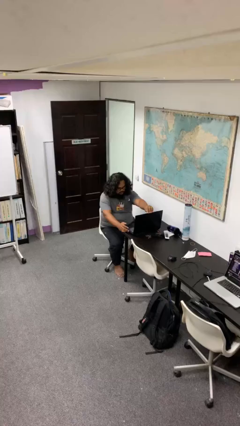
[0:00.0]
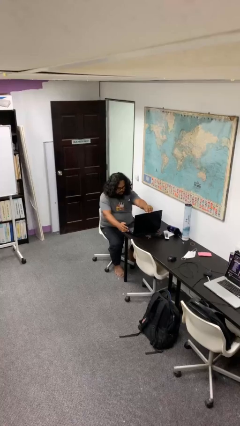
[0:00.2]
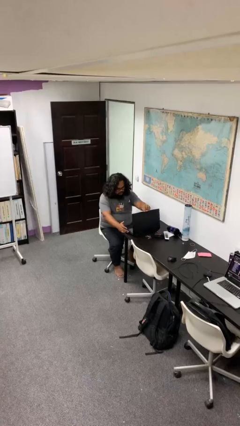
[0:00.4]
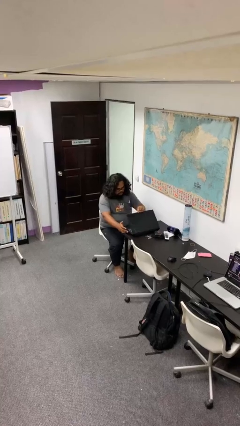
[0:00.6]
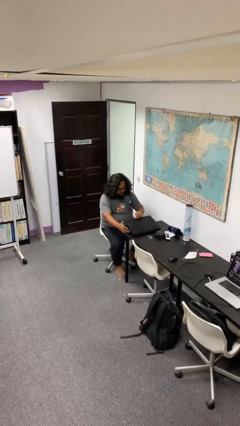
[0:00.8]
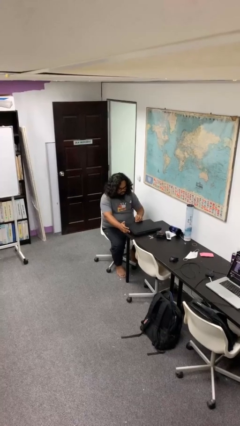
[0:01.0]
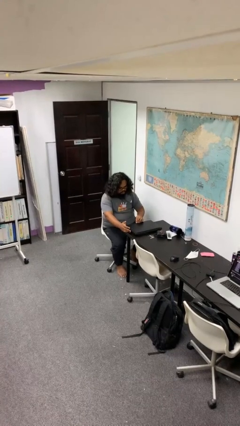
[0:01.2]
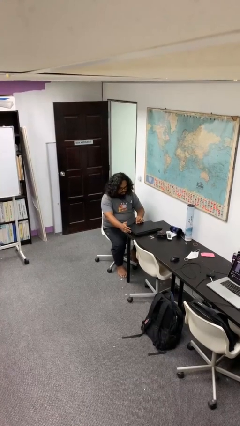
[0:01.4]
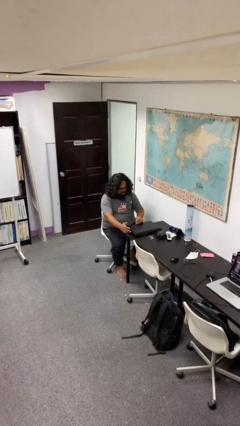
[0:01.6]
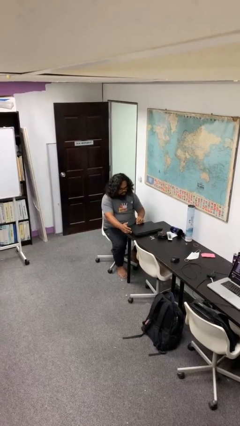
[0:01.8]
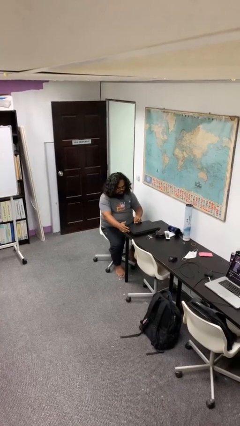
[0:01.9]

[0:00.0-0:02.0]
person closes laptop

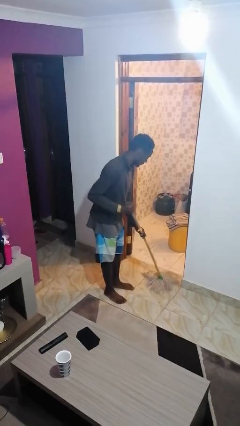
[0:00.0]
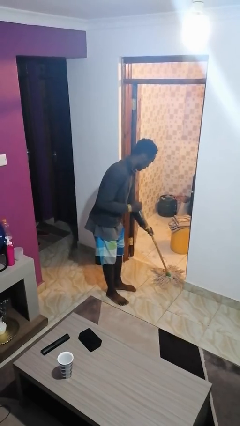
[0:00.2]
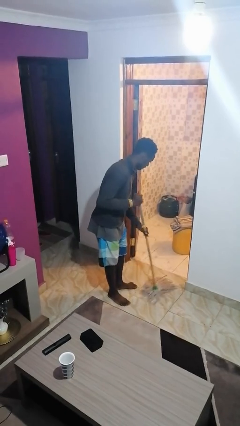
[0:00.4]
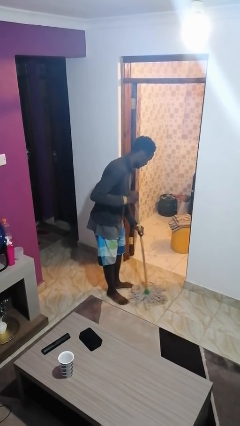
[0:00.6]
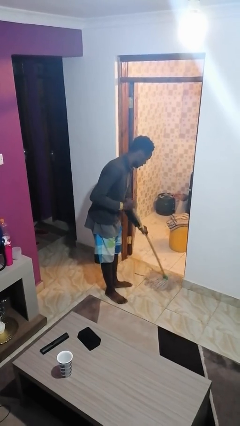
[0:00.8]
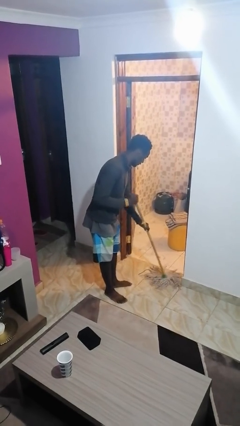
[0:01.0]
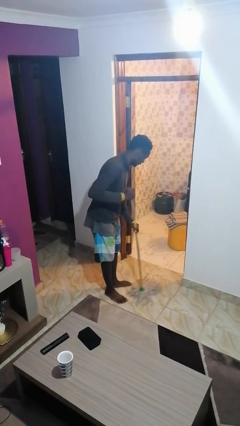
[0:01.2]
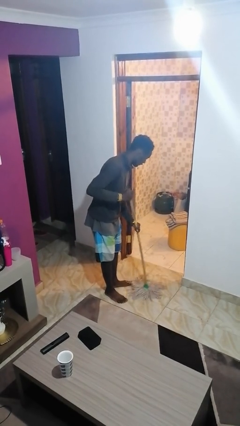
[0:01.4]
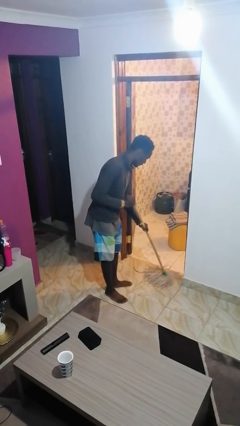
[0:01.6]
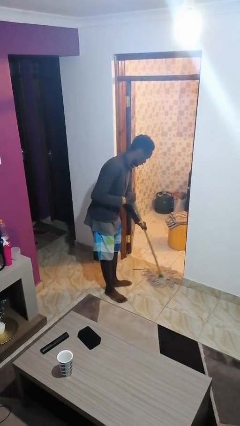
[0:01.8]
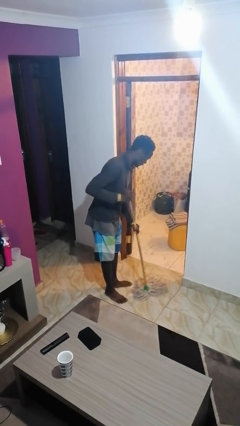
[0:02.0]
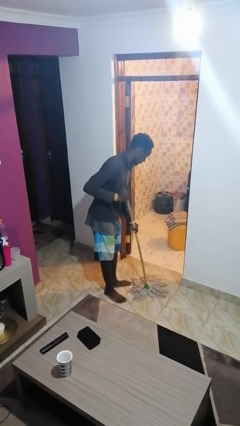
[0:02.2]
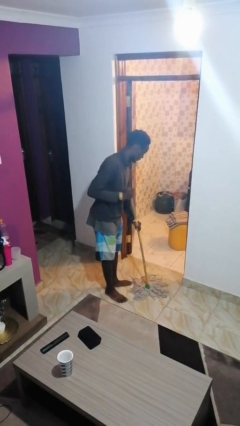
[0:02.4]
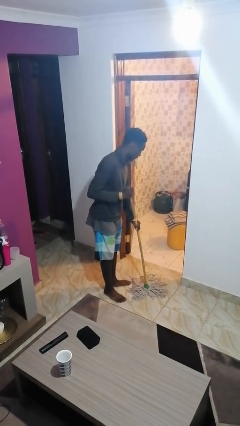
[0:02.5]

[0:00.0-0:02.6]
person mops

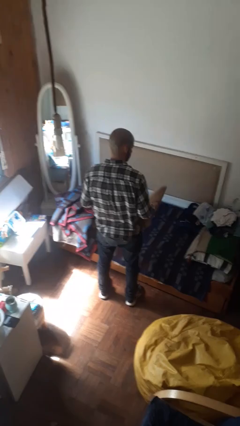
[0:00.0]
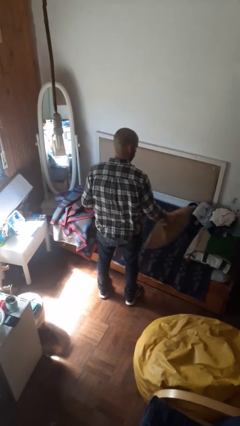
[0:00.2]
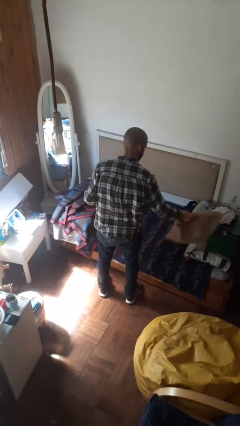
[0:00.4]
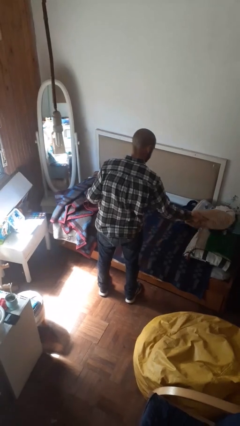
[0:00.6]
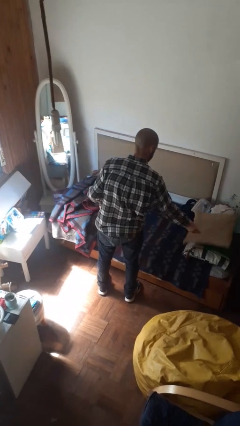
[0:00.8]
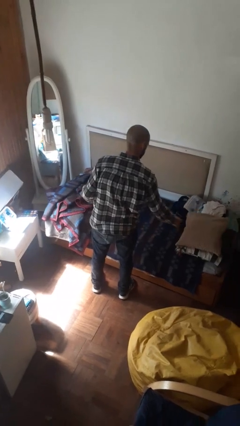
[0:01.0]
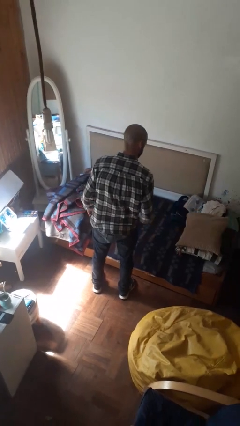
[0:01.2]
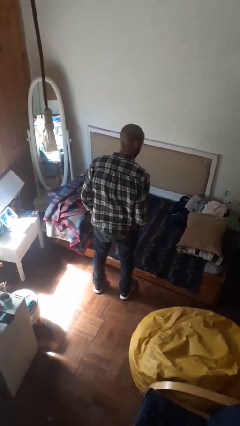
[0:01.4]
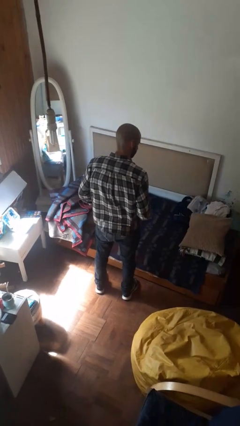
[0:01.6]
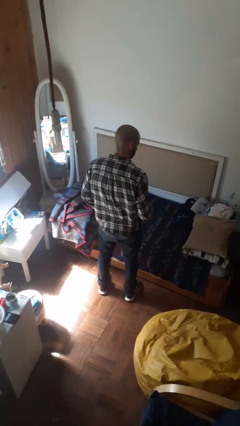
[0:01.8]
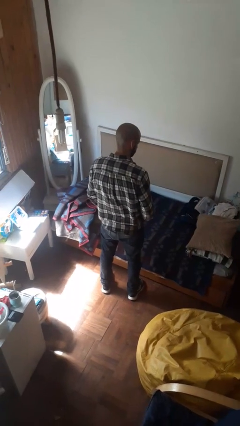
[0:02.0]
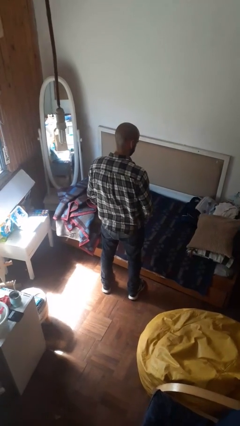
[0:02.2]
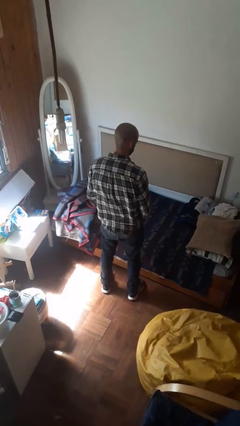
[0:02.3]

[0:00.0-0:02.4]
person puts down object on bed

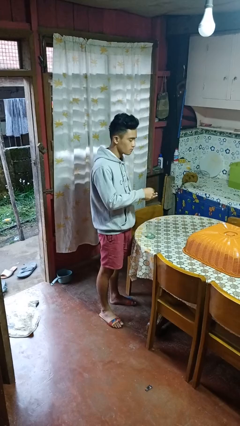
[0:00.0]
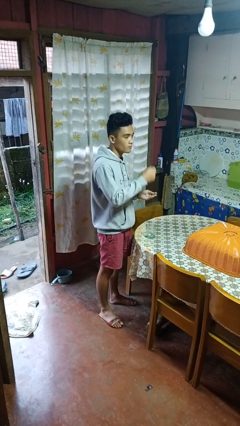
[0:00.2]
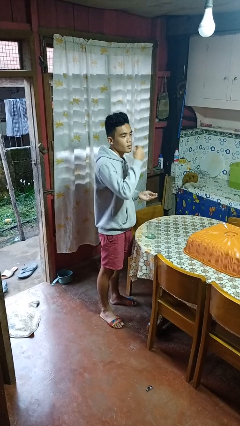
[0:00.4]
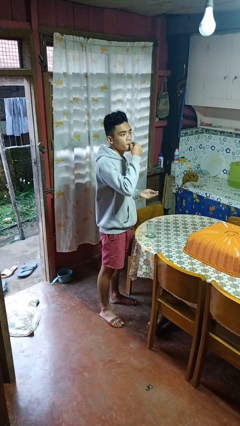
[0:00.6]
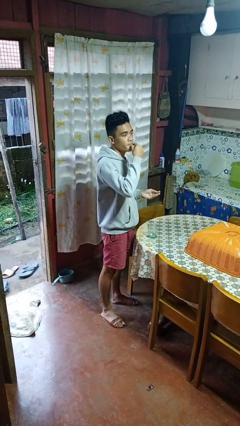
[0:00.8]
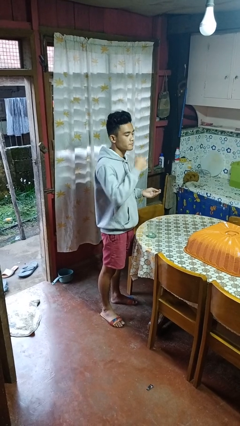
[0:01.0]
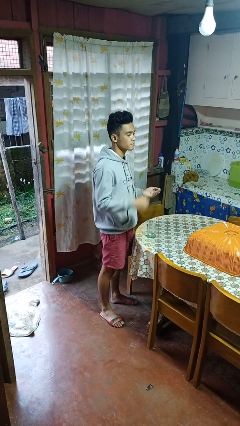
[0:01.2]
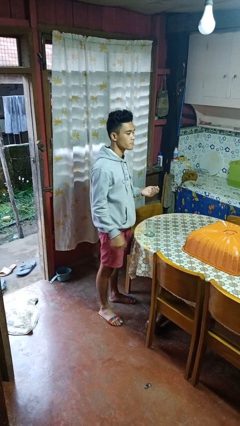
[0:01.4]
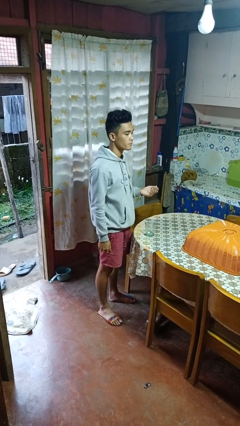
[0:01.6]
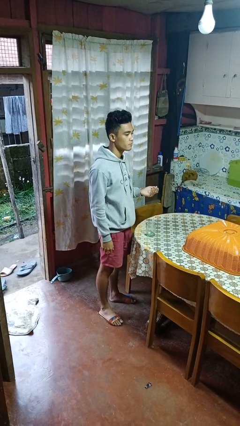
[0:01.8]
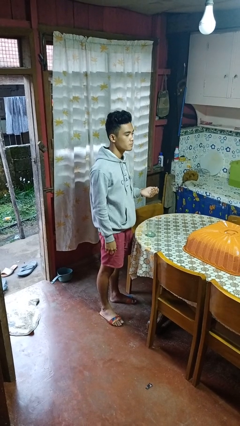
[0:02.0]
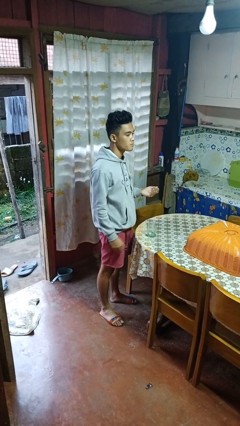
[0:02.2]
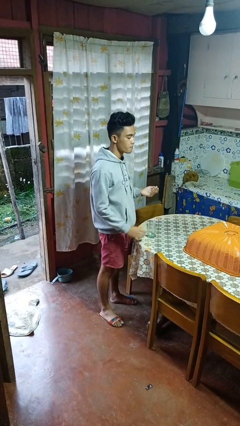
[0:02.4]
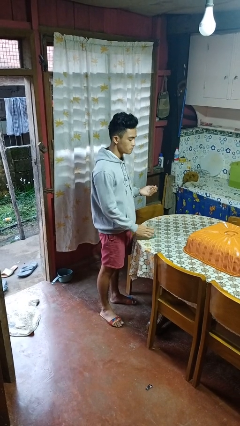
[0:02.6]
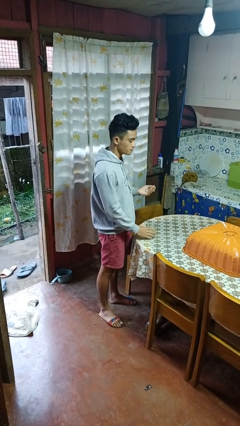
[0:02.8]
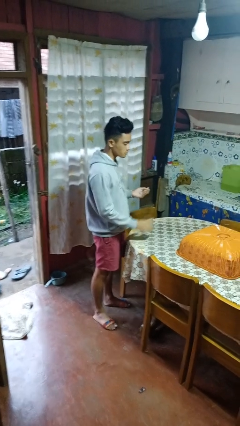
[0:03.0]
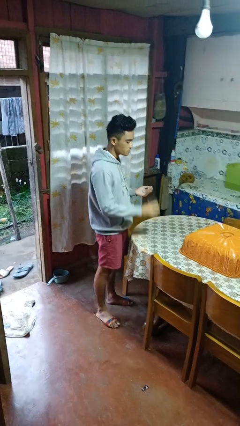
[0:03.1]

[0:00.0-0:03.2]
person takes medicine pills

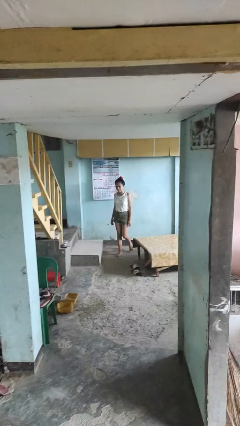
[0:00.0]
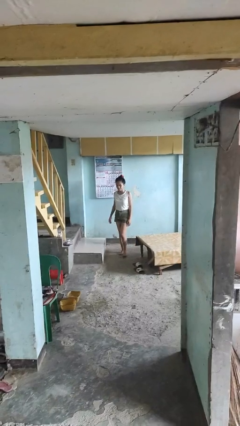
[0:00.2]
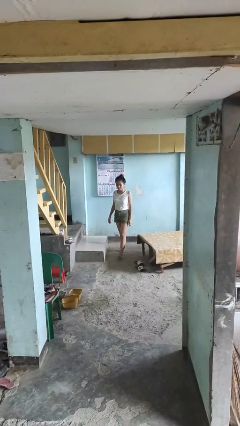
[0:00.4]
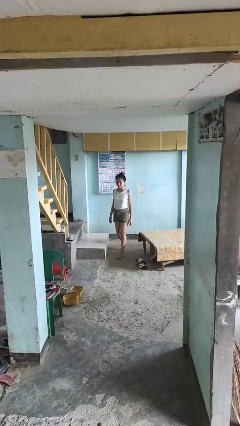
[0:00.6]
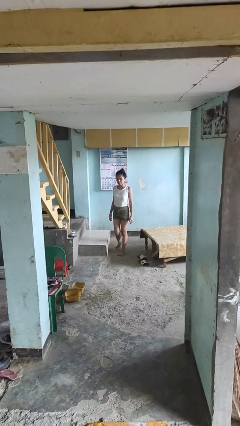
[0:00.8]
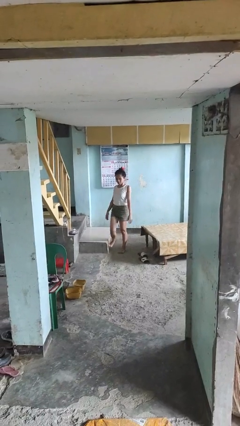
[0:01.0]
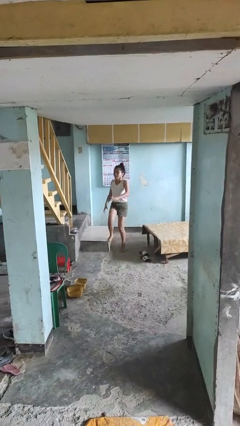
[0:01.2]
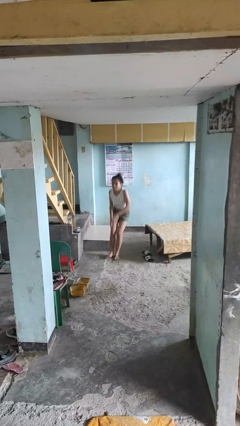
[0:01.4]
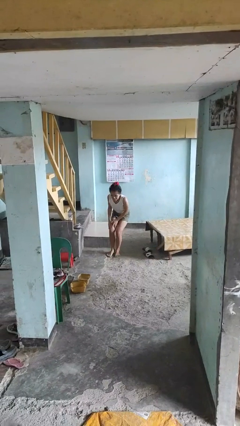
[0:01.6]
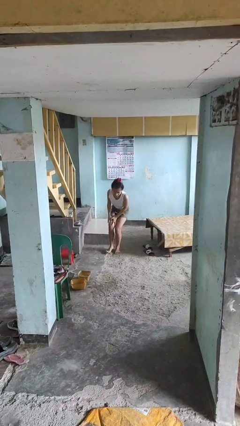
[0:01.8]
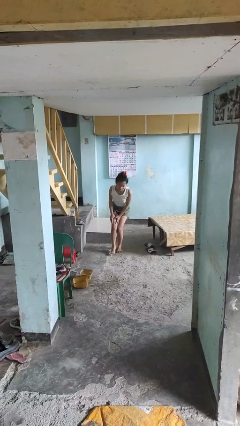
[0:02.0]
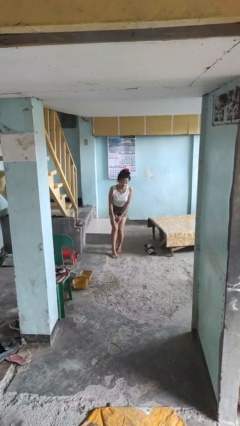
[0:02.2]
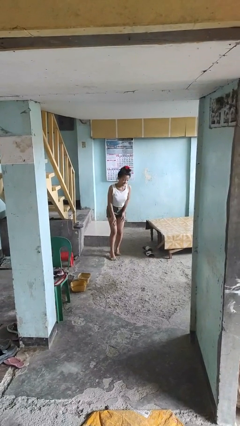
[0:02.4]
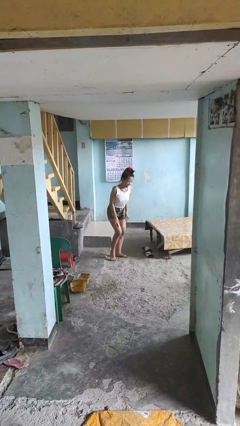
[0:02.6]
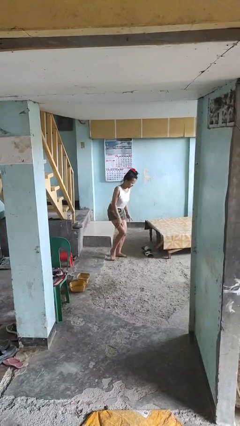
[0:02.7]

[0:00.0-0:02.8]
person stubs toe

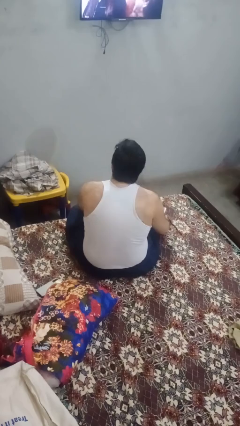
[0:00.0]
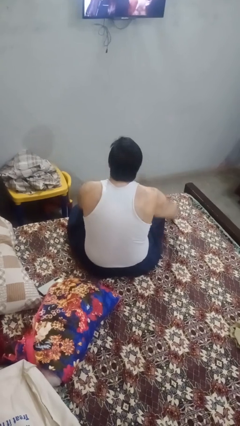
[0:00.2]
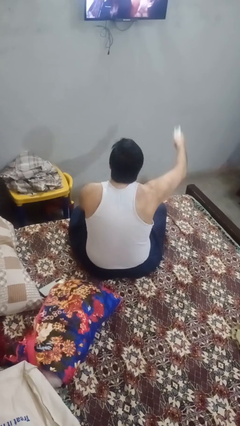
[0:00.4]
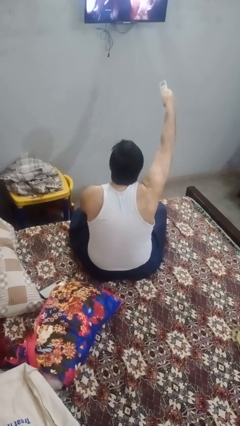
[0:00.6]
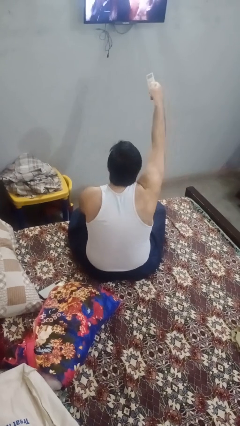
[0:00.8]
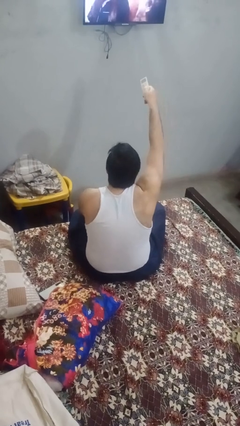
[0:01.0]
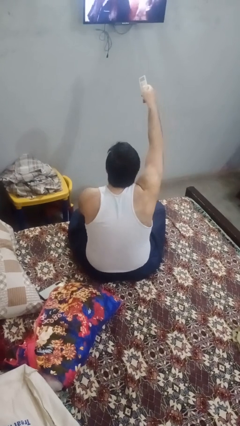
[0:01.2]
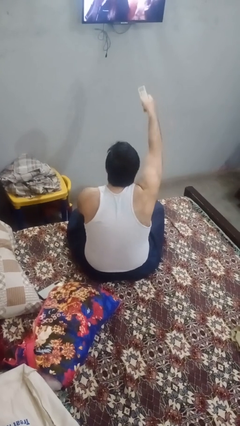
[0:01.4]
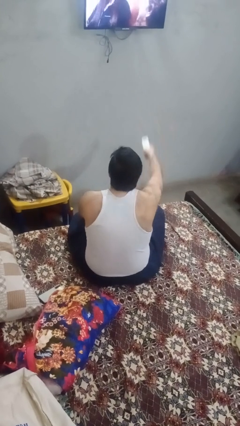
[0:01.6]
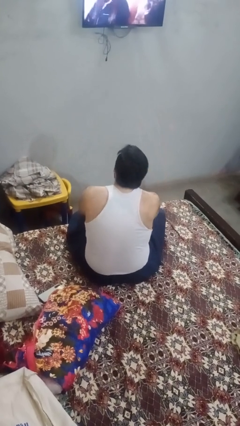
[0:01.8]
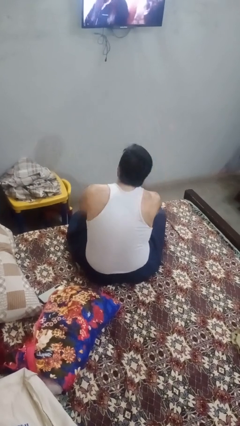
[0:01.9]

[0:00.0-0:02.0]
person uses television remote

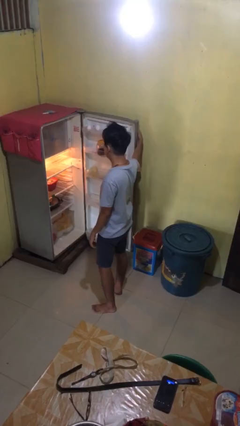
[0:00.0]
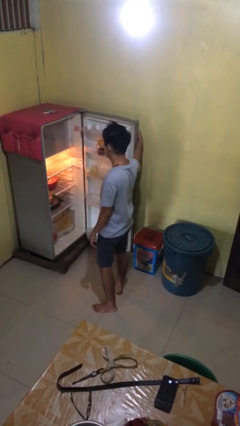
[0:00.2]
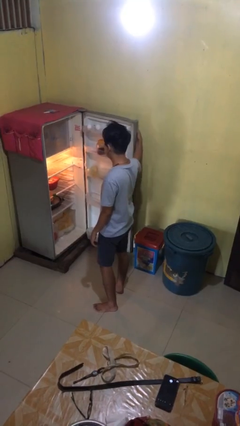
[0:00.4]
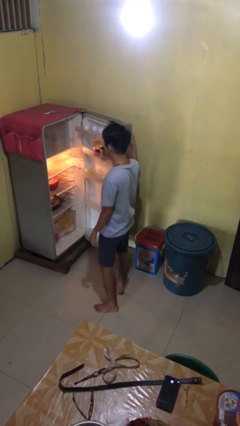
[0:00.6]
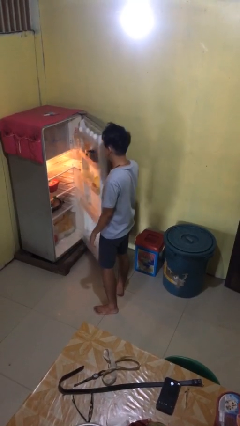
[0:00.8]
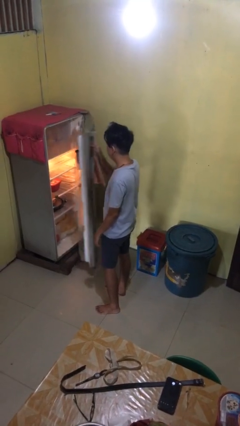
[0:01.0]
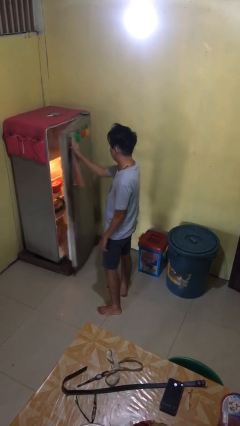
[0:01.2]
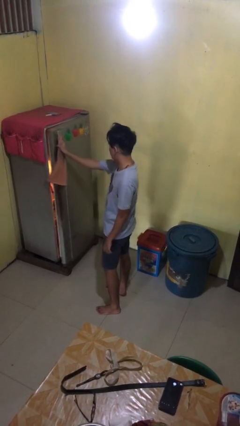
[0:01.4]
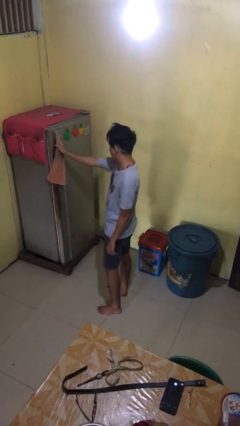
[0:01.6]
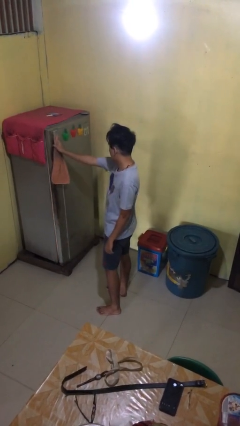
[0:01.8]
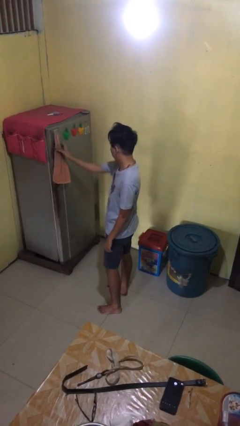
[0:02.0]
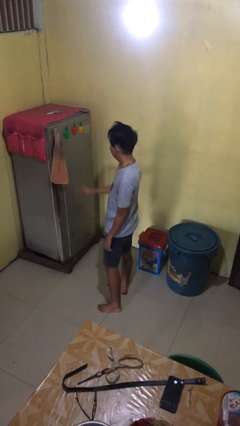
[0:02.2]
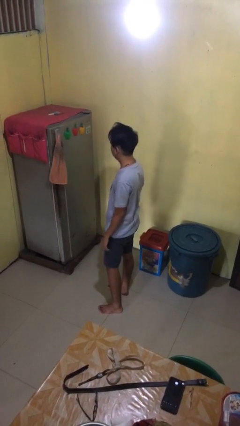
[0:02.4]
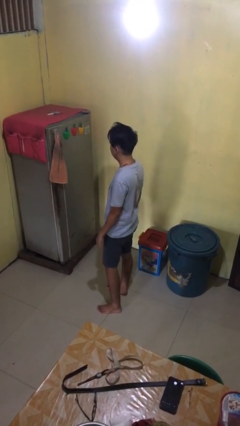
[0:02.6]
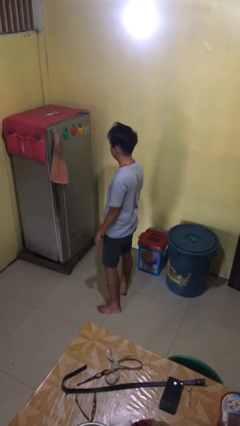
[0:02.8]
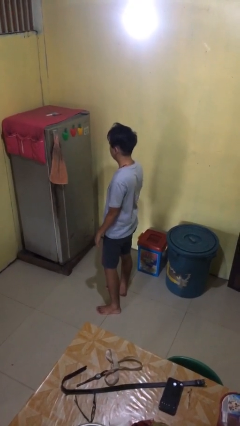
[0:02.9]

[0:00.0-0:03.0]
person closes refrigerator
